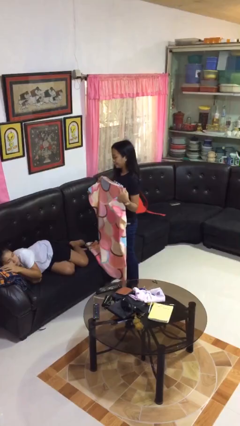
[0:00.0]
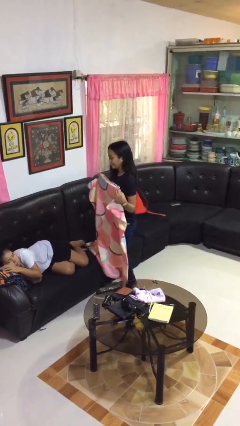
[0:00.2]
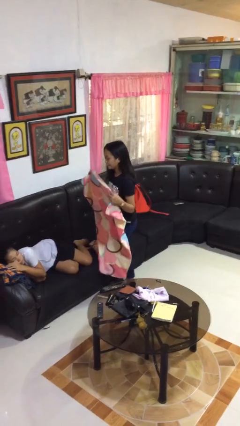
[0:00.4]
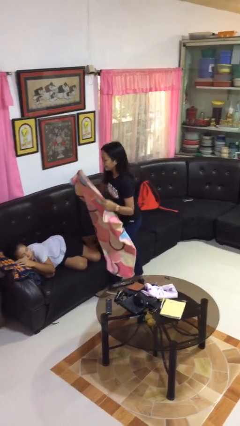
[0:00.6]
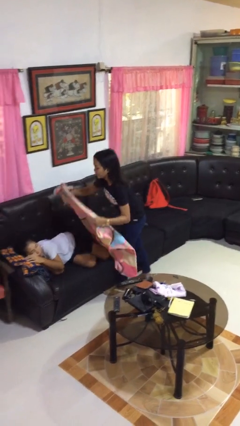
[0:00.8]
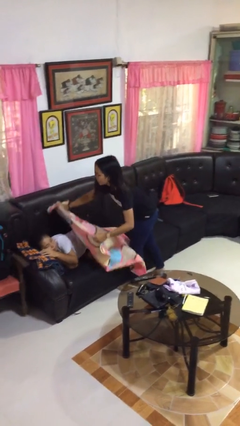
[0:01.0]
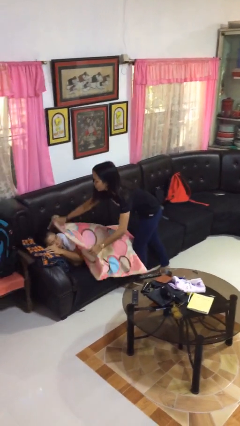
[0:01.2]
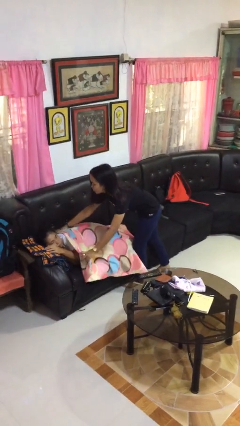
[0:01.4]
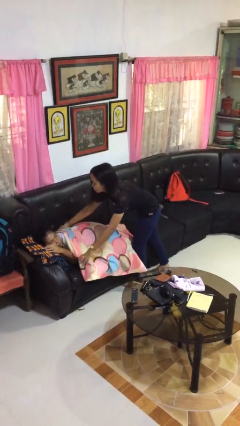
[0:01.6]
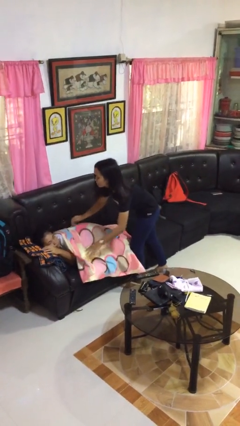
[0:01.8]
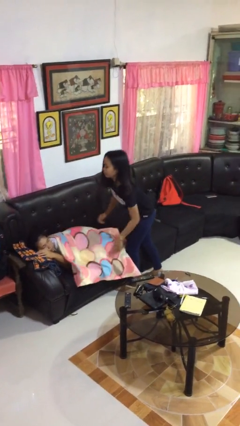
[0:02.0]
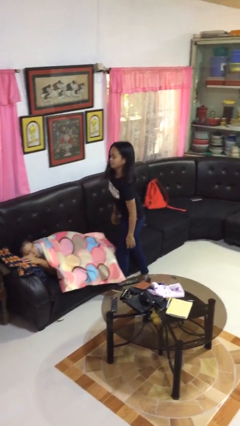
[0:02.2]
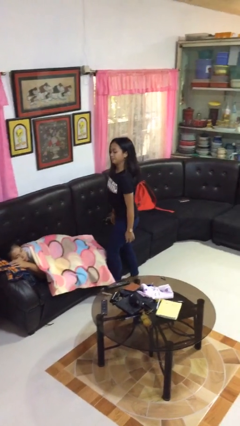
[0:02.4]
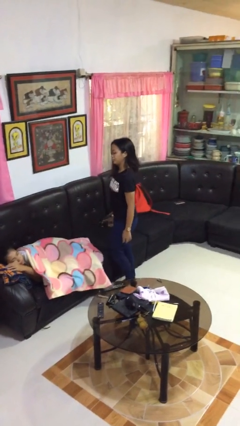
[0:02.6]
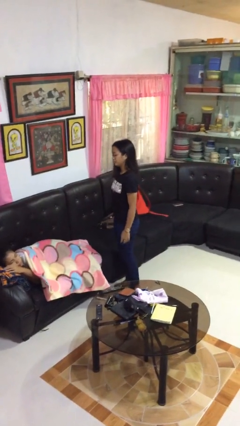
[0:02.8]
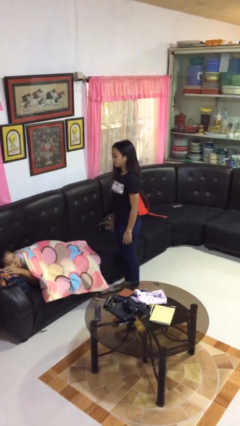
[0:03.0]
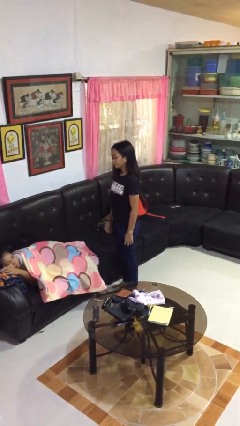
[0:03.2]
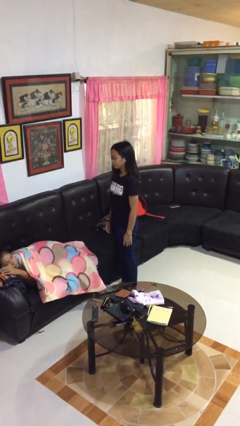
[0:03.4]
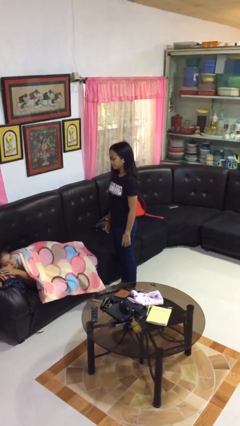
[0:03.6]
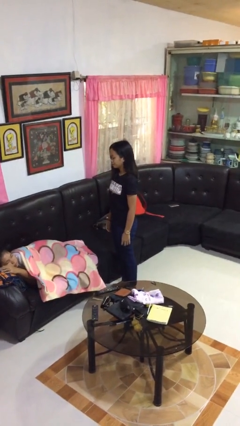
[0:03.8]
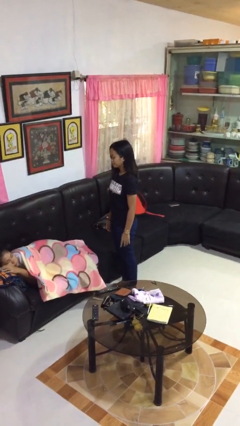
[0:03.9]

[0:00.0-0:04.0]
person covers friend with blanket

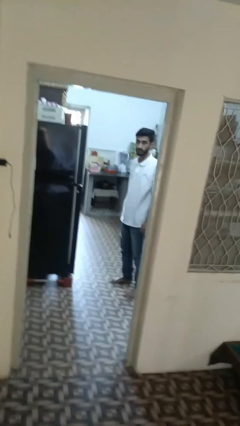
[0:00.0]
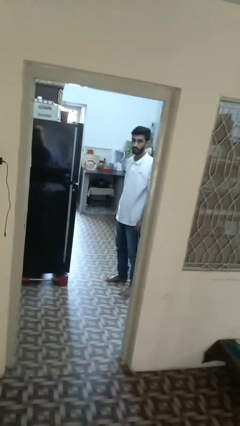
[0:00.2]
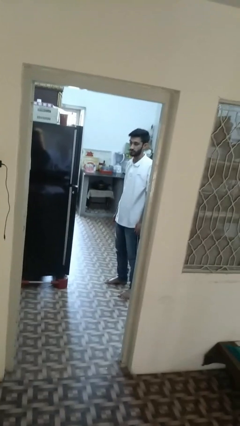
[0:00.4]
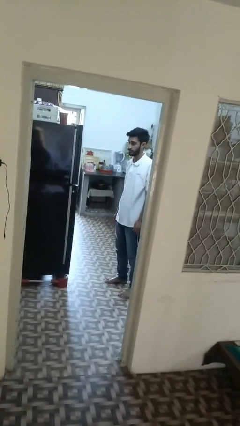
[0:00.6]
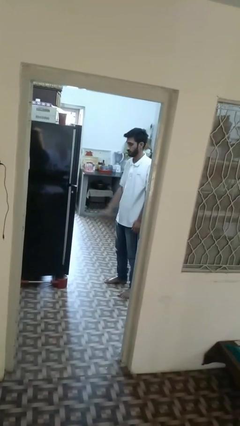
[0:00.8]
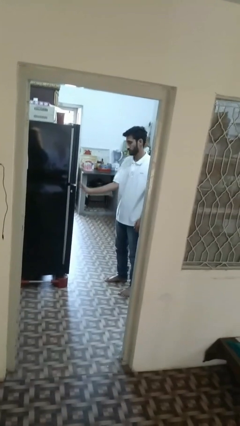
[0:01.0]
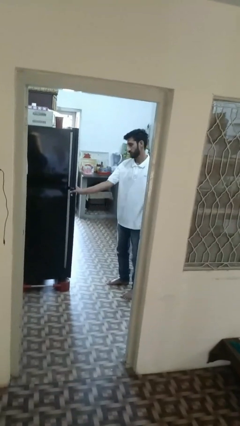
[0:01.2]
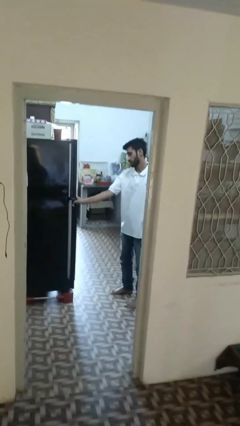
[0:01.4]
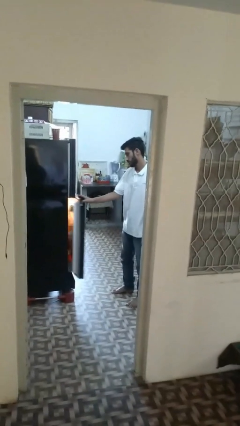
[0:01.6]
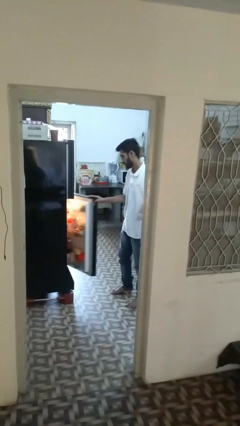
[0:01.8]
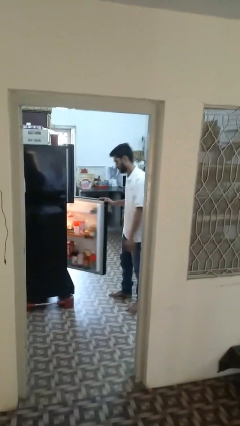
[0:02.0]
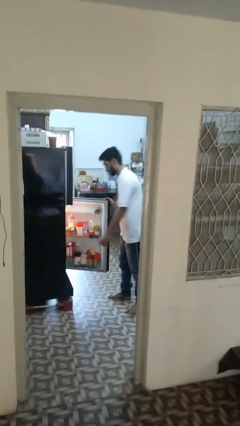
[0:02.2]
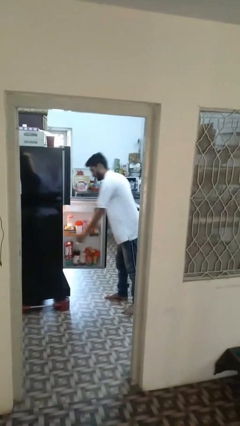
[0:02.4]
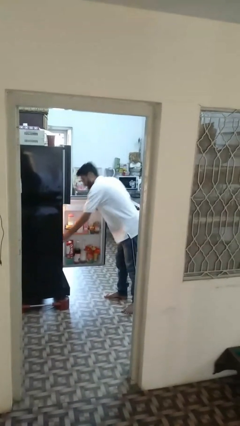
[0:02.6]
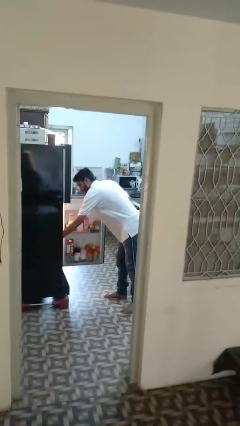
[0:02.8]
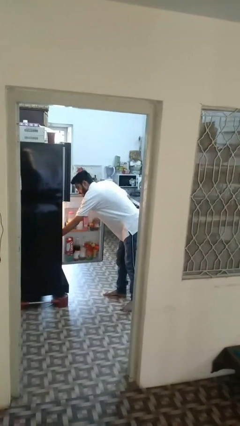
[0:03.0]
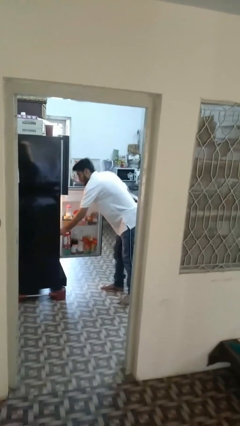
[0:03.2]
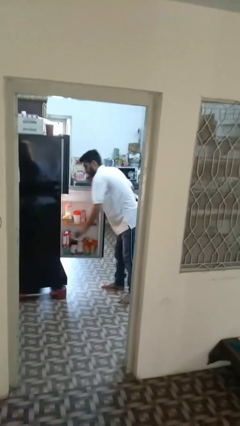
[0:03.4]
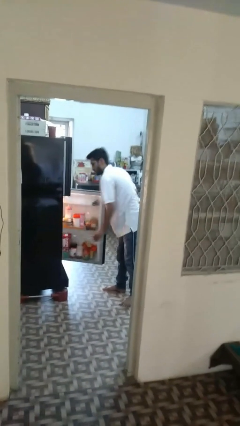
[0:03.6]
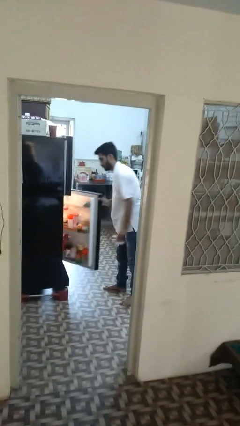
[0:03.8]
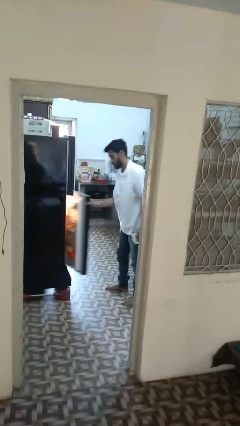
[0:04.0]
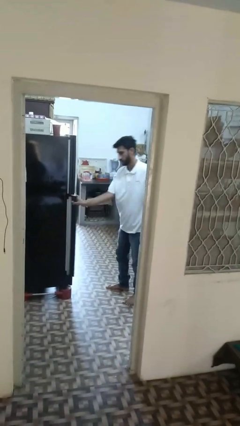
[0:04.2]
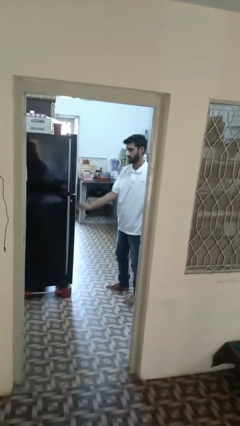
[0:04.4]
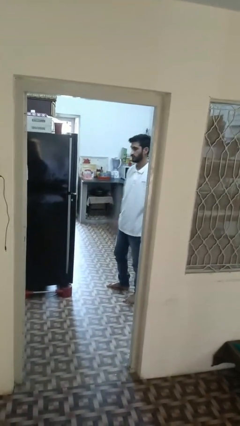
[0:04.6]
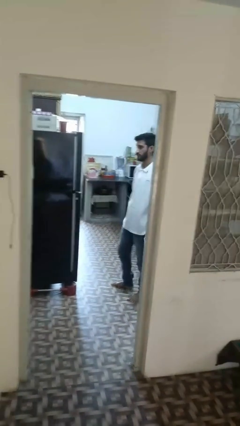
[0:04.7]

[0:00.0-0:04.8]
person takes object from refrigerator

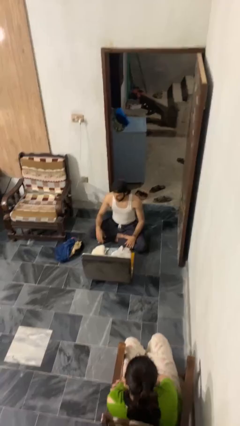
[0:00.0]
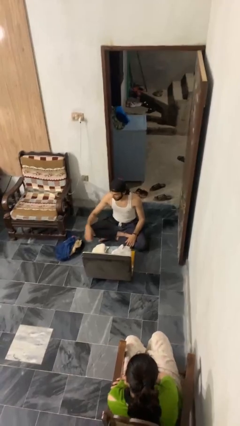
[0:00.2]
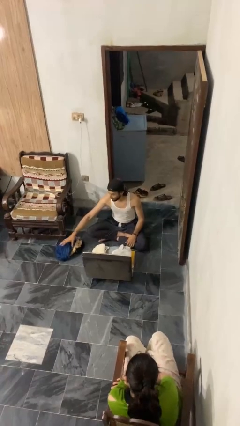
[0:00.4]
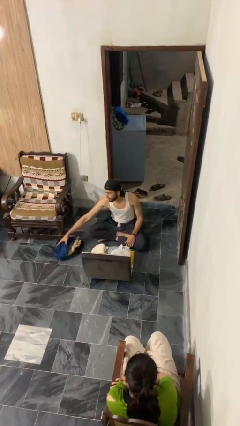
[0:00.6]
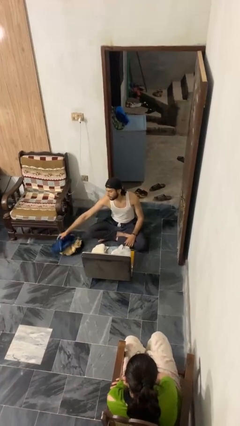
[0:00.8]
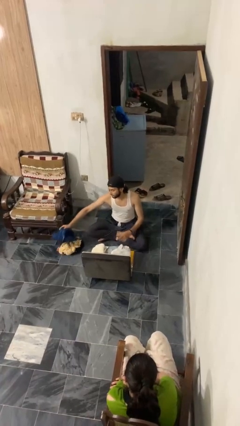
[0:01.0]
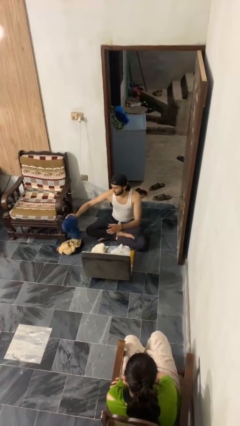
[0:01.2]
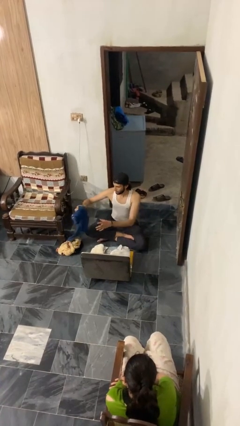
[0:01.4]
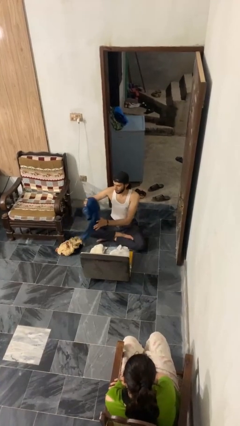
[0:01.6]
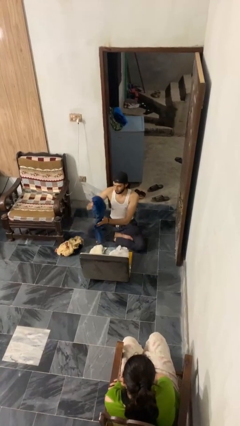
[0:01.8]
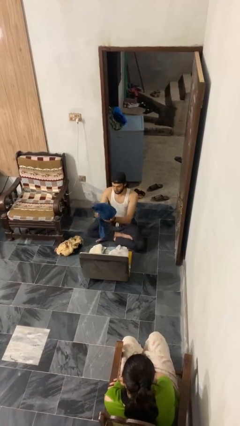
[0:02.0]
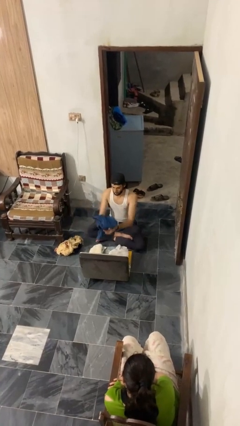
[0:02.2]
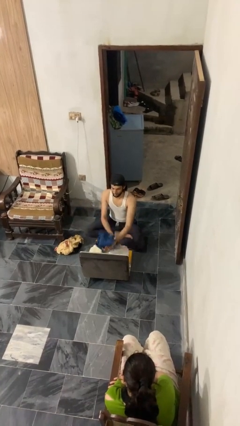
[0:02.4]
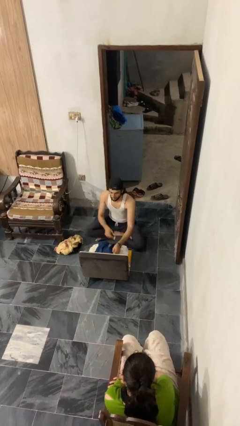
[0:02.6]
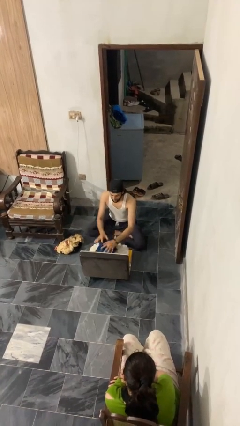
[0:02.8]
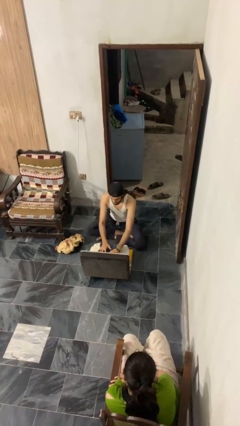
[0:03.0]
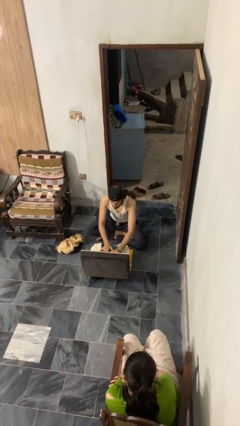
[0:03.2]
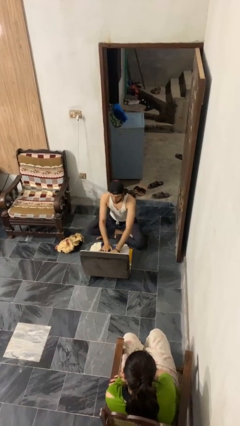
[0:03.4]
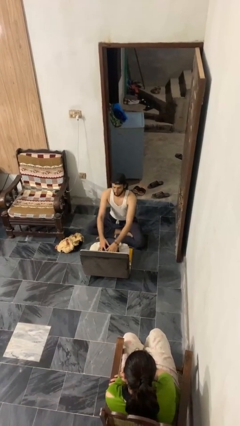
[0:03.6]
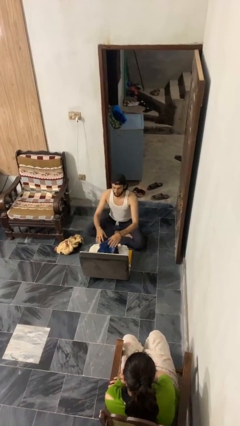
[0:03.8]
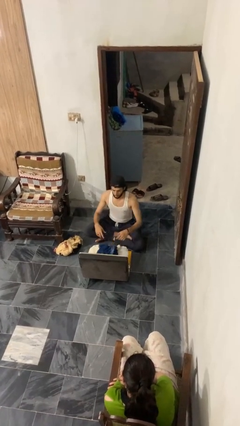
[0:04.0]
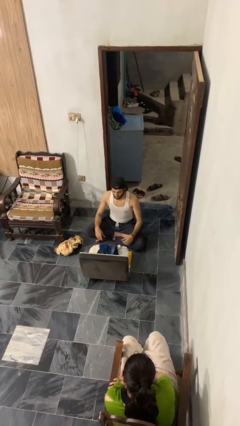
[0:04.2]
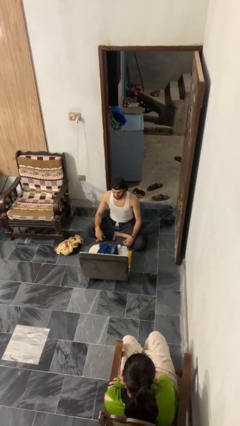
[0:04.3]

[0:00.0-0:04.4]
person loads clothes into suitcase

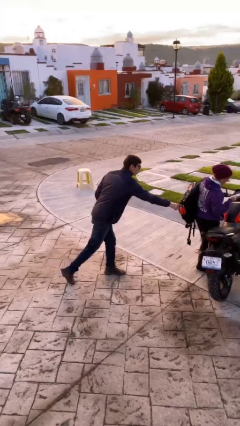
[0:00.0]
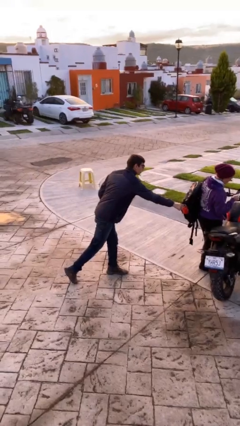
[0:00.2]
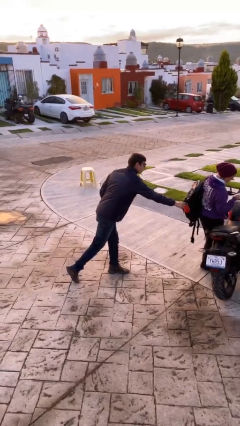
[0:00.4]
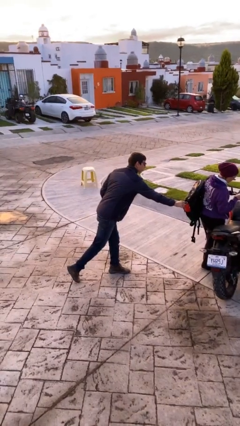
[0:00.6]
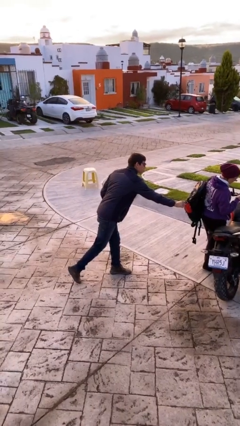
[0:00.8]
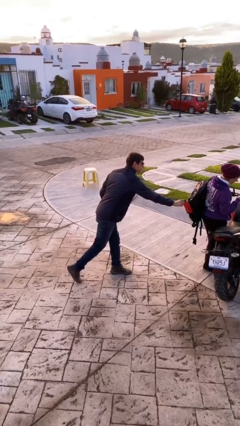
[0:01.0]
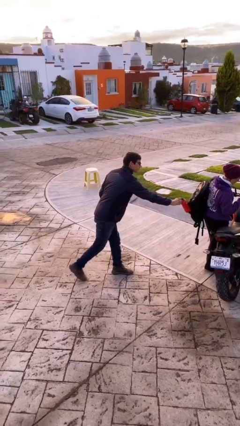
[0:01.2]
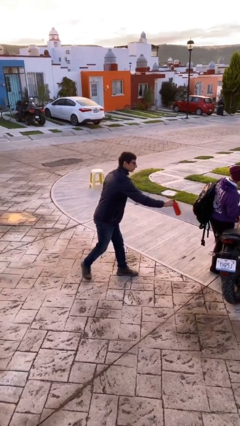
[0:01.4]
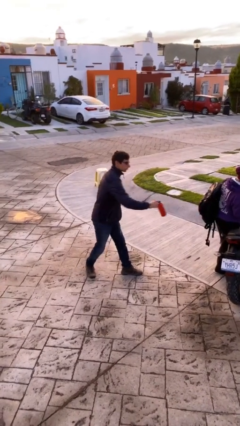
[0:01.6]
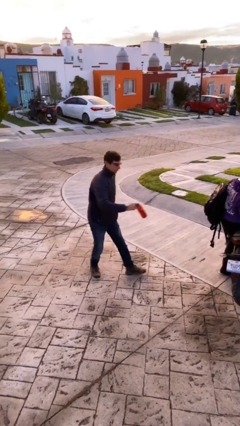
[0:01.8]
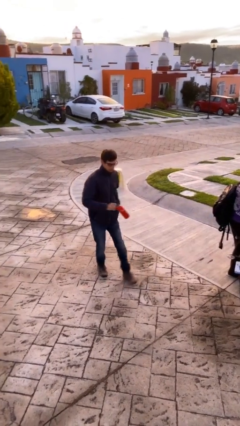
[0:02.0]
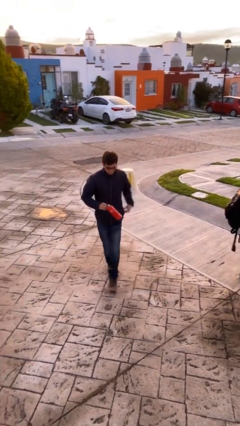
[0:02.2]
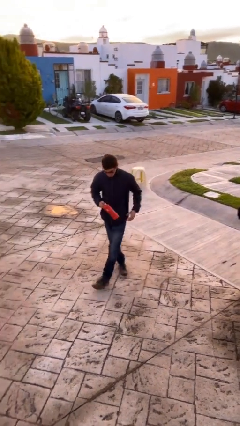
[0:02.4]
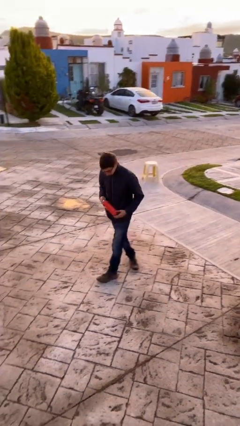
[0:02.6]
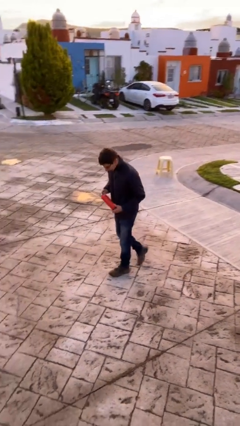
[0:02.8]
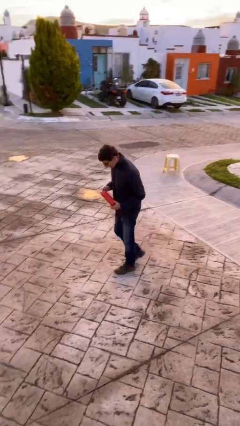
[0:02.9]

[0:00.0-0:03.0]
person steals object from person

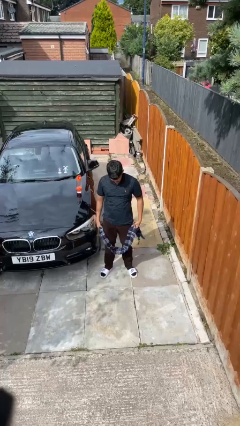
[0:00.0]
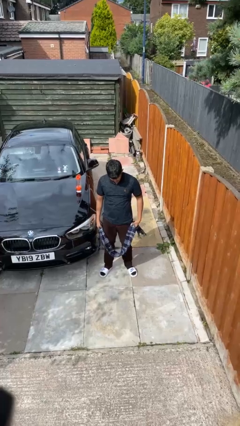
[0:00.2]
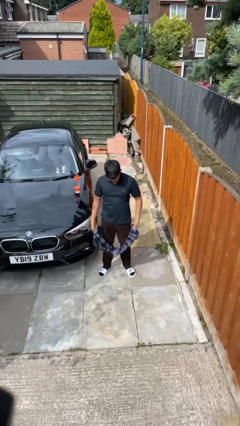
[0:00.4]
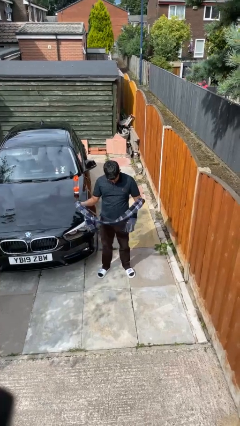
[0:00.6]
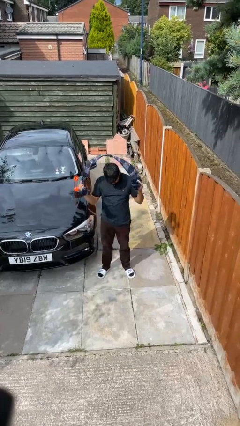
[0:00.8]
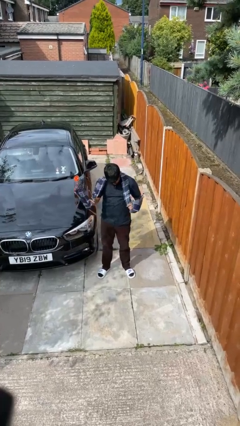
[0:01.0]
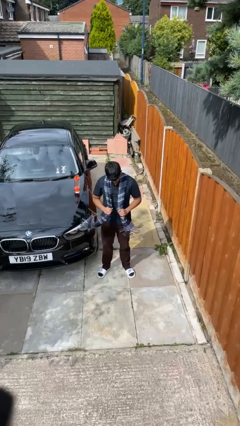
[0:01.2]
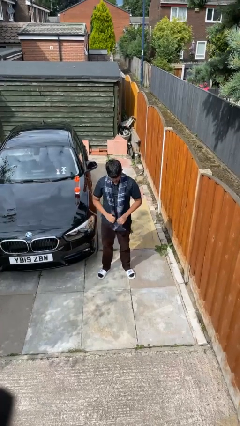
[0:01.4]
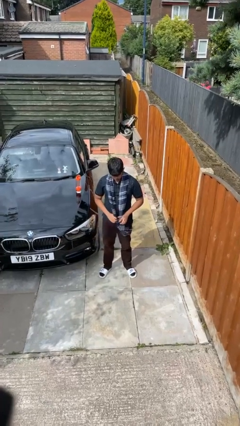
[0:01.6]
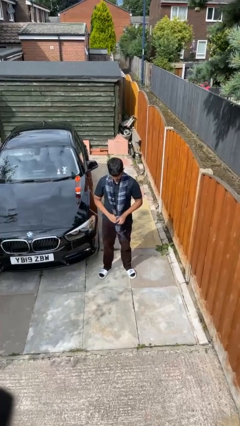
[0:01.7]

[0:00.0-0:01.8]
person puts on scarf
